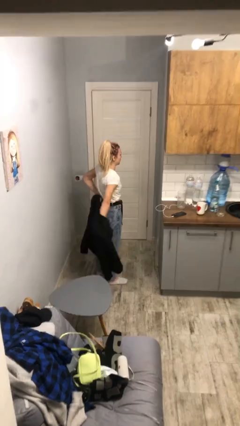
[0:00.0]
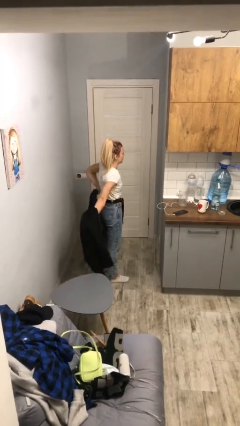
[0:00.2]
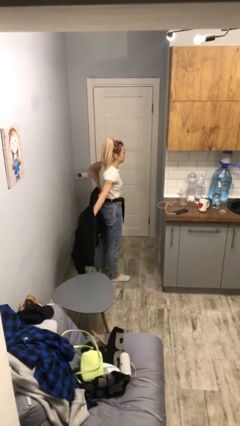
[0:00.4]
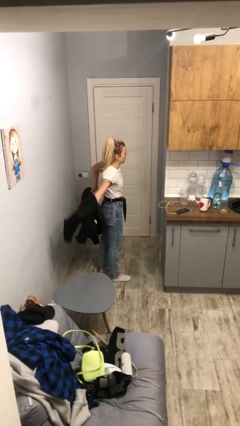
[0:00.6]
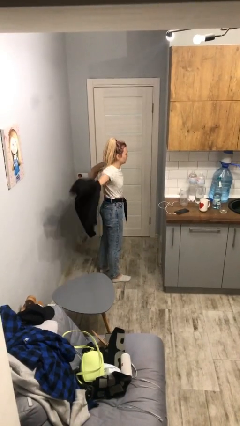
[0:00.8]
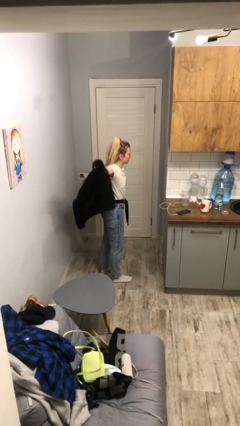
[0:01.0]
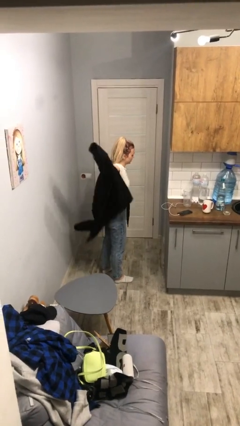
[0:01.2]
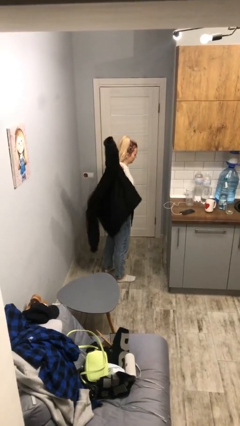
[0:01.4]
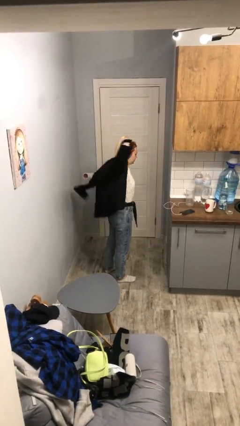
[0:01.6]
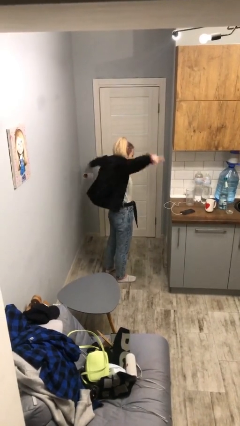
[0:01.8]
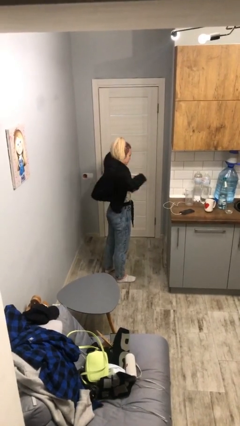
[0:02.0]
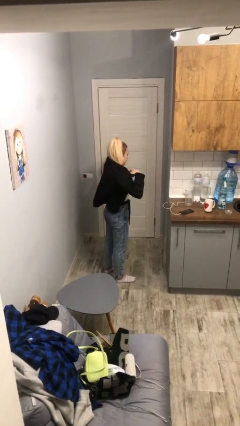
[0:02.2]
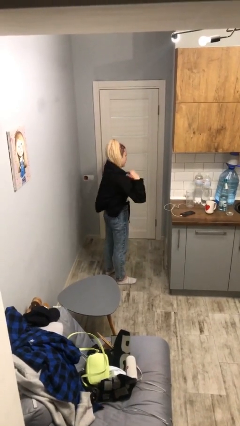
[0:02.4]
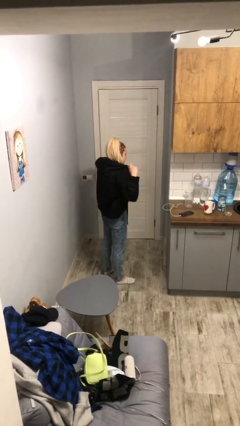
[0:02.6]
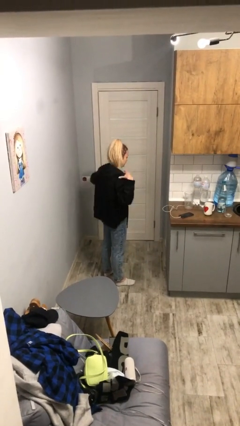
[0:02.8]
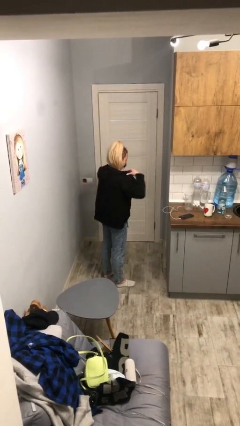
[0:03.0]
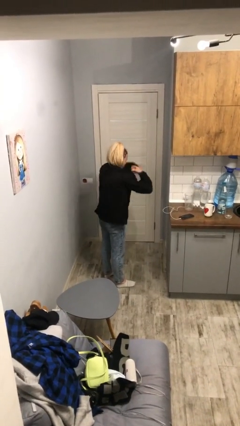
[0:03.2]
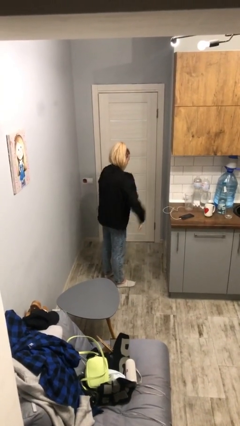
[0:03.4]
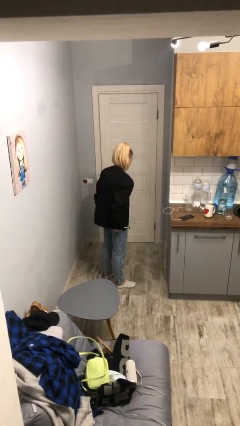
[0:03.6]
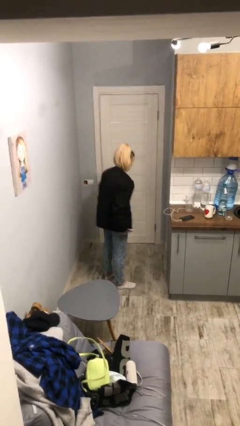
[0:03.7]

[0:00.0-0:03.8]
person puts on jacket

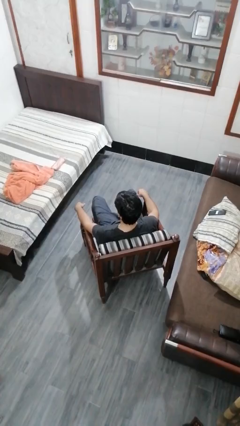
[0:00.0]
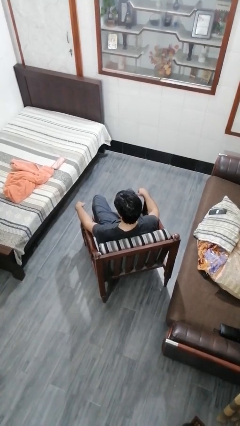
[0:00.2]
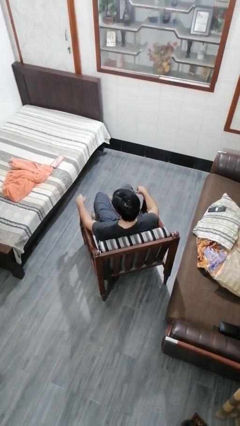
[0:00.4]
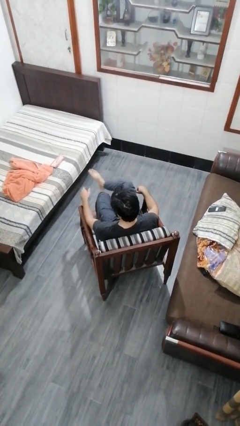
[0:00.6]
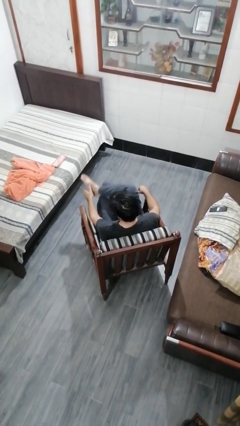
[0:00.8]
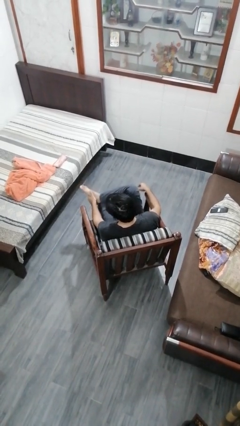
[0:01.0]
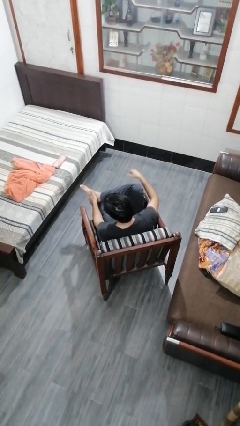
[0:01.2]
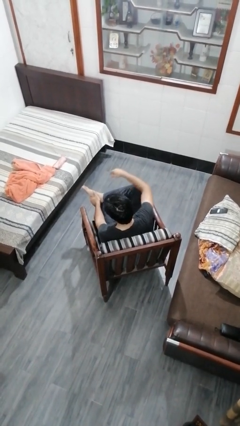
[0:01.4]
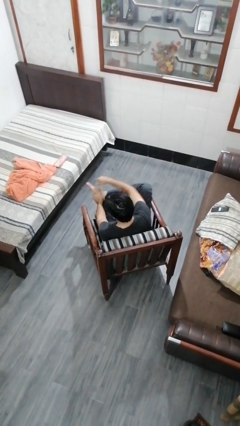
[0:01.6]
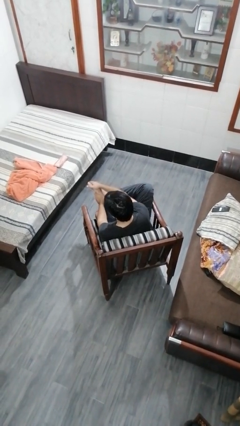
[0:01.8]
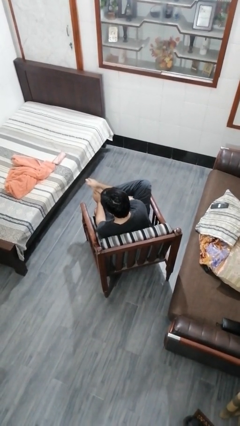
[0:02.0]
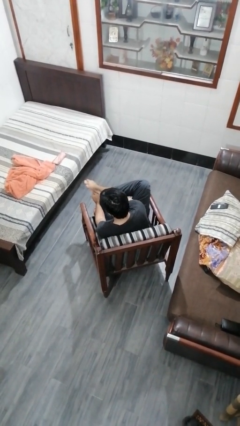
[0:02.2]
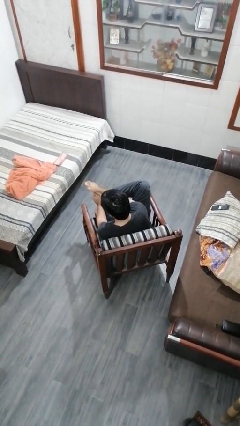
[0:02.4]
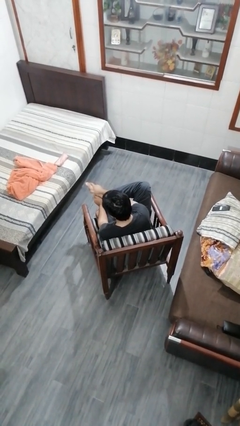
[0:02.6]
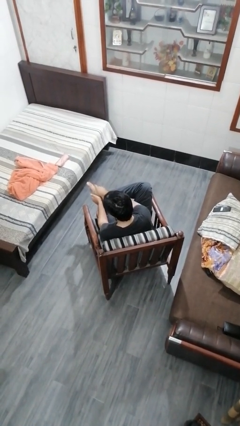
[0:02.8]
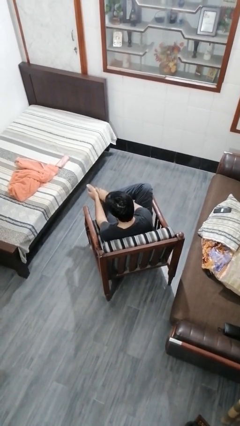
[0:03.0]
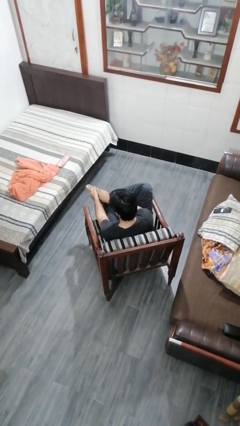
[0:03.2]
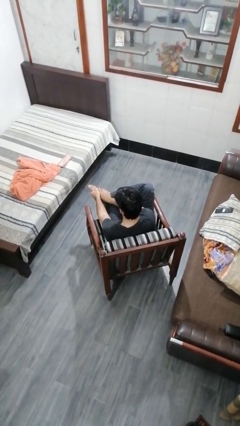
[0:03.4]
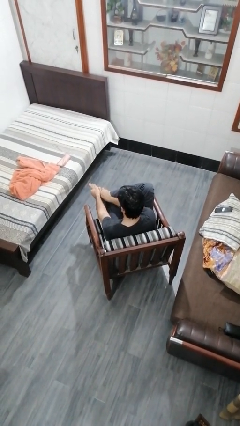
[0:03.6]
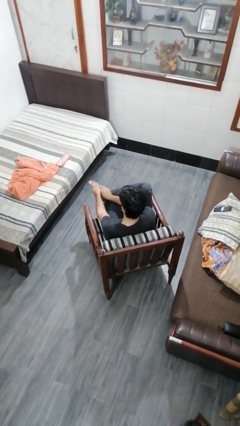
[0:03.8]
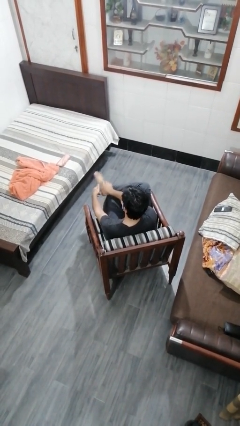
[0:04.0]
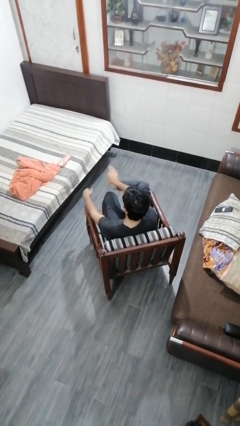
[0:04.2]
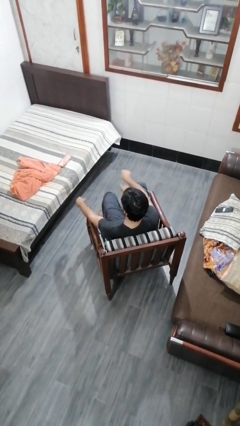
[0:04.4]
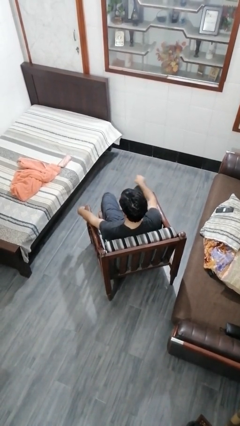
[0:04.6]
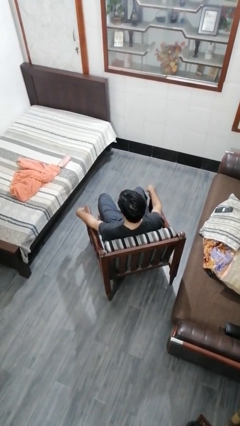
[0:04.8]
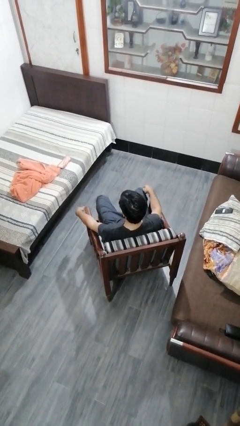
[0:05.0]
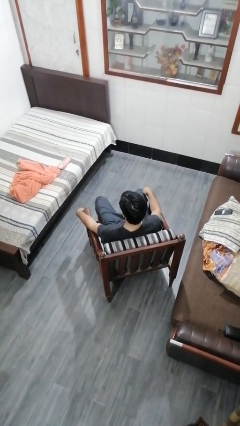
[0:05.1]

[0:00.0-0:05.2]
person rubs foot

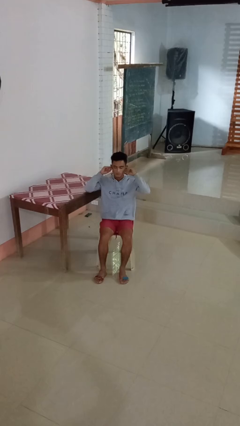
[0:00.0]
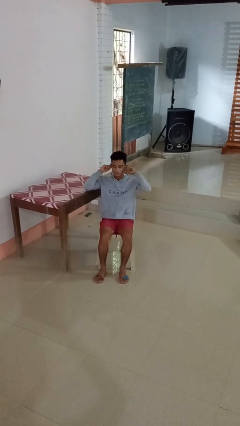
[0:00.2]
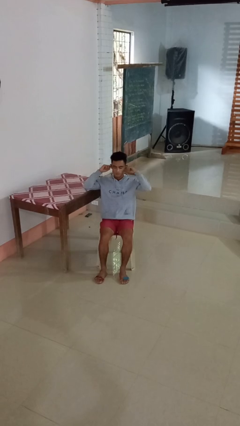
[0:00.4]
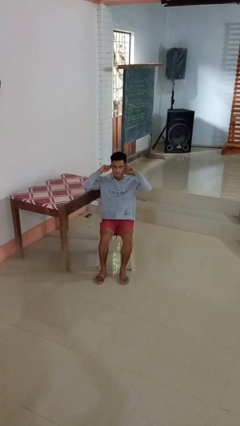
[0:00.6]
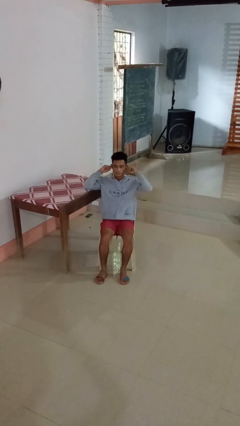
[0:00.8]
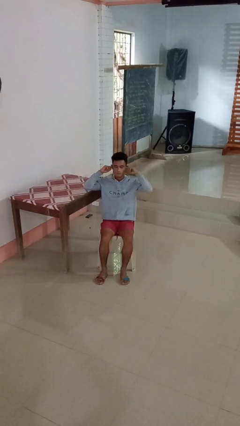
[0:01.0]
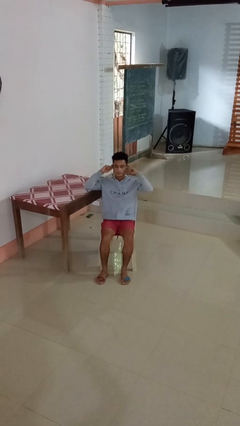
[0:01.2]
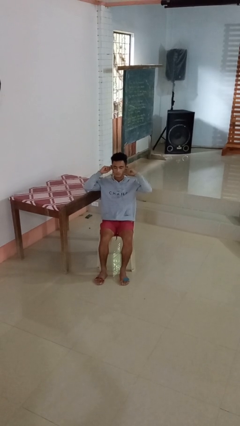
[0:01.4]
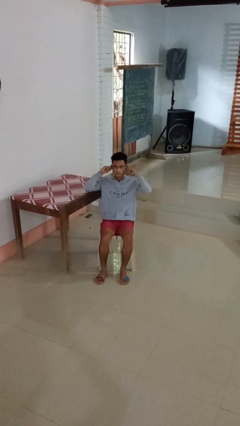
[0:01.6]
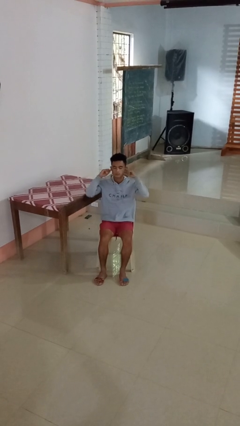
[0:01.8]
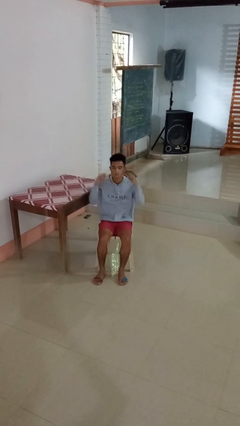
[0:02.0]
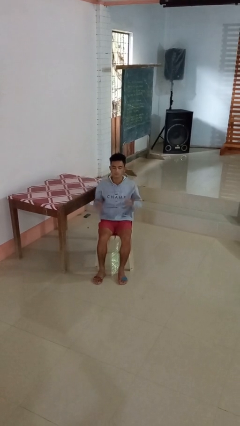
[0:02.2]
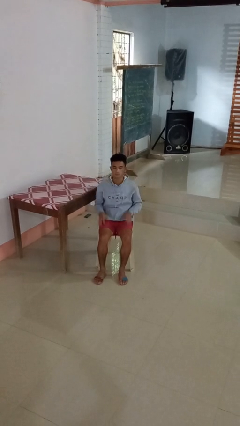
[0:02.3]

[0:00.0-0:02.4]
person puts fingers in ear

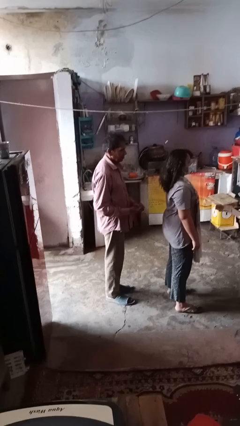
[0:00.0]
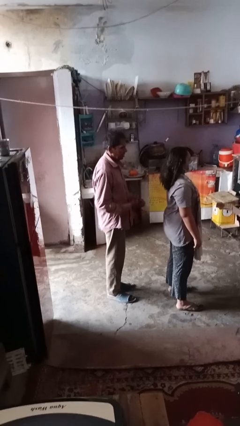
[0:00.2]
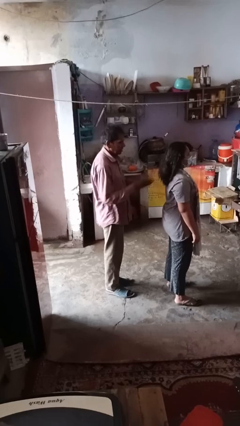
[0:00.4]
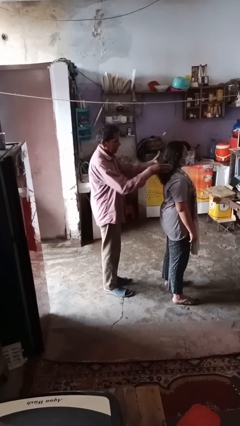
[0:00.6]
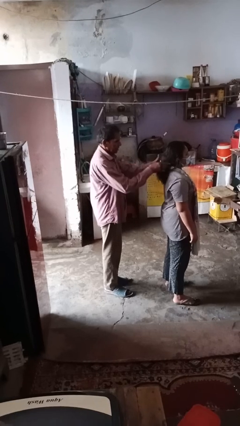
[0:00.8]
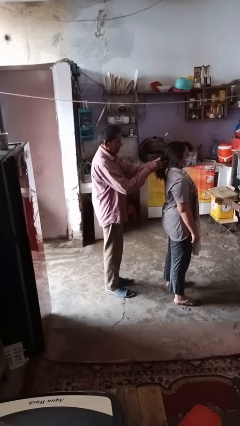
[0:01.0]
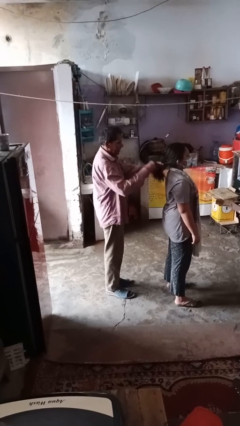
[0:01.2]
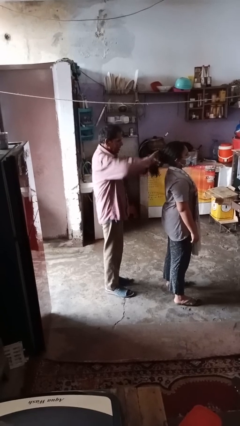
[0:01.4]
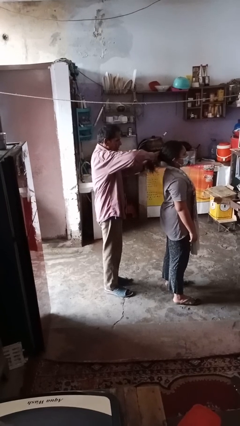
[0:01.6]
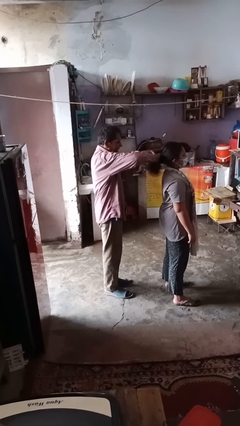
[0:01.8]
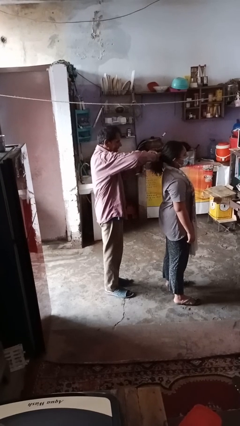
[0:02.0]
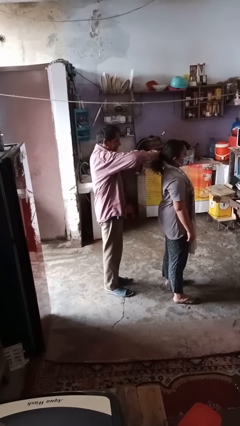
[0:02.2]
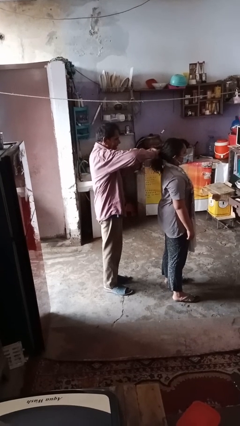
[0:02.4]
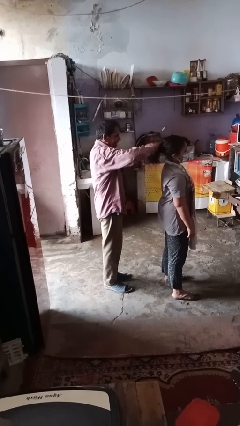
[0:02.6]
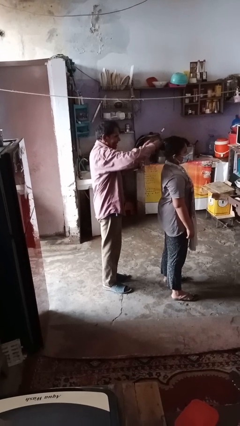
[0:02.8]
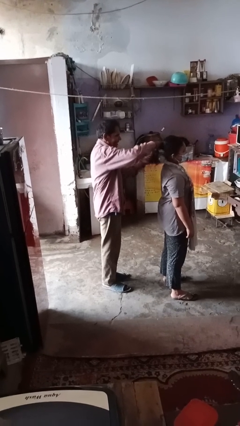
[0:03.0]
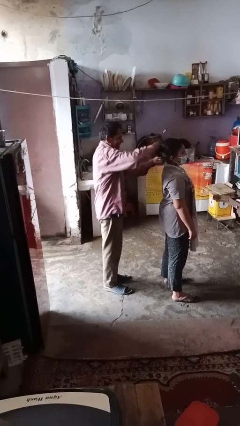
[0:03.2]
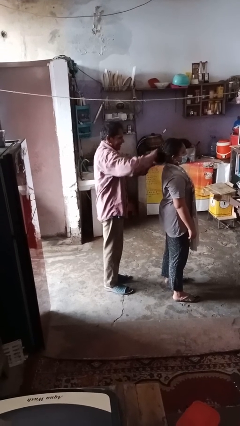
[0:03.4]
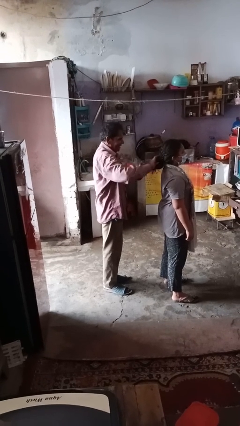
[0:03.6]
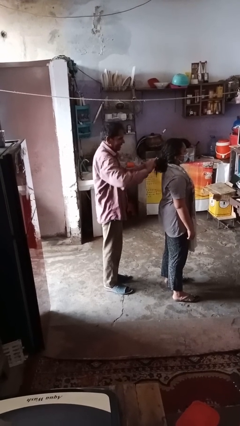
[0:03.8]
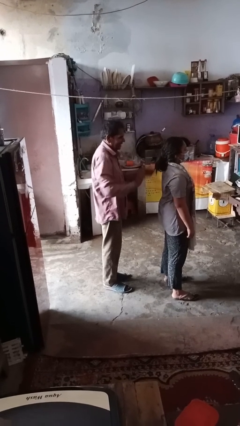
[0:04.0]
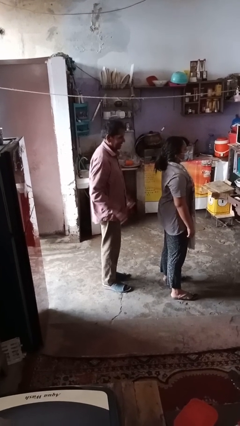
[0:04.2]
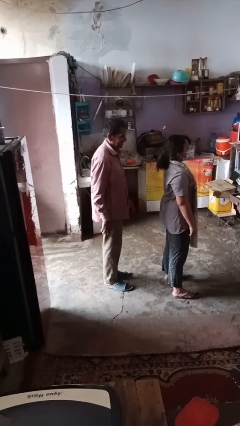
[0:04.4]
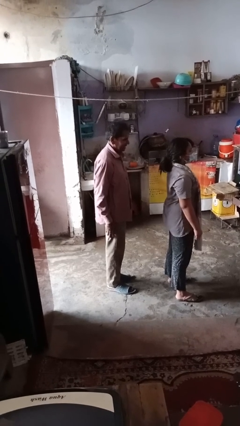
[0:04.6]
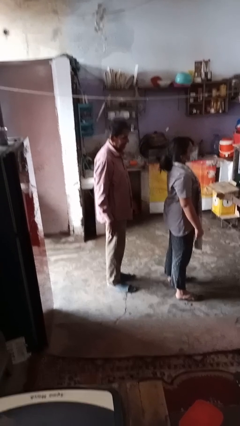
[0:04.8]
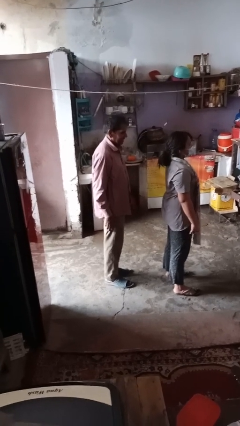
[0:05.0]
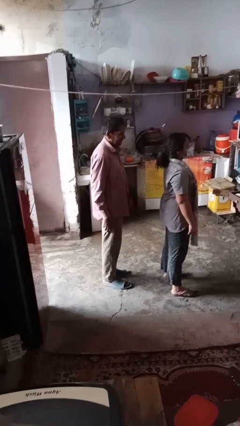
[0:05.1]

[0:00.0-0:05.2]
person braids hair of person

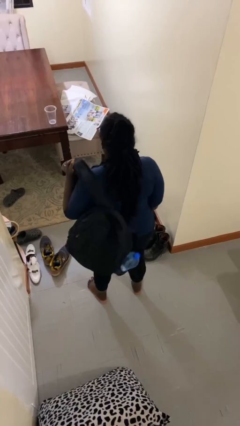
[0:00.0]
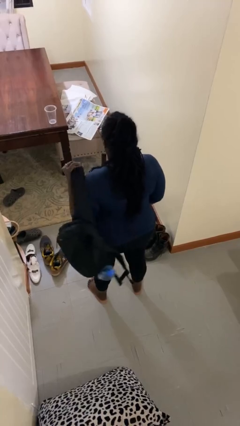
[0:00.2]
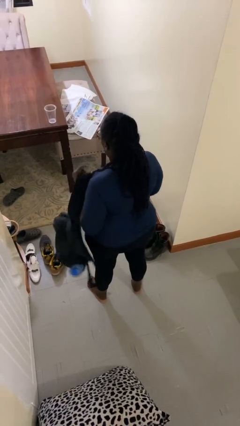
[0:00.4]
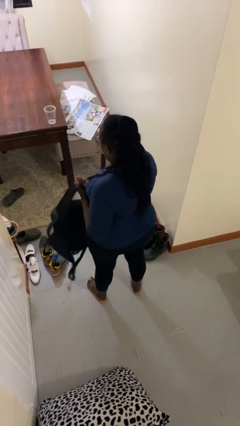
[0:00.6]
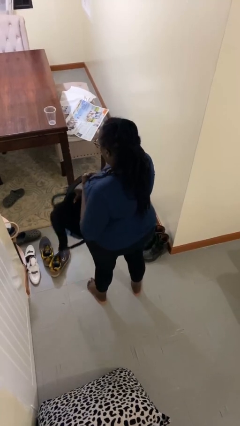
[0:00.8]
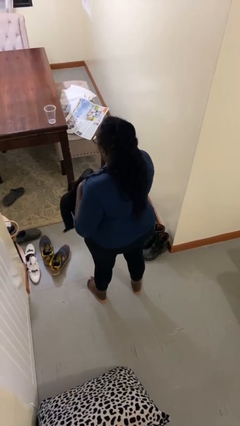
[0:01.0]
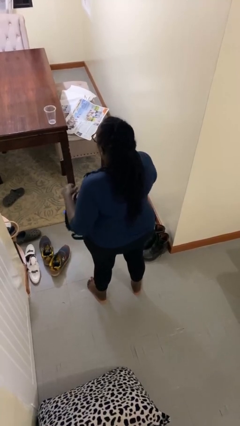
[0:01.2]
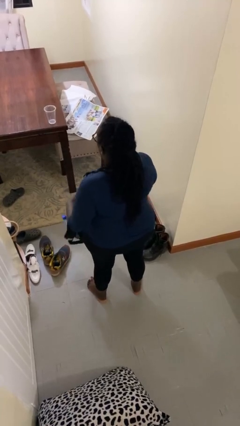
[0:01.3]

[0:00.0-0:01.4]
person takes off backpack
